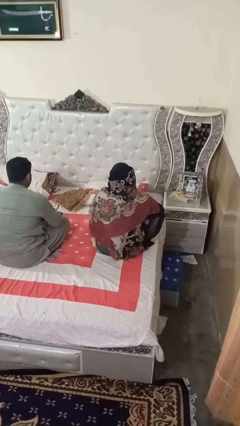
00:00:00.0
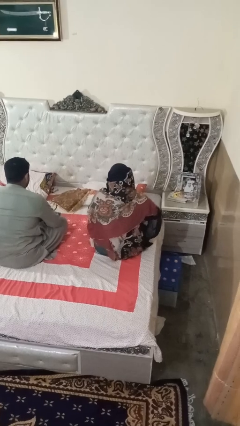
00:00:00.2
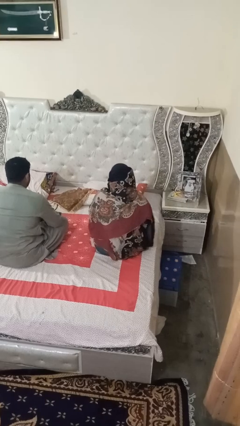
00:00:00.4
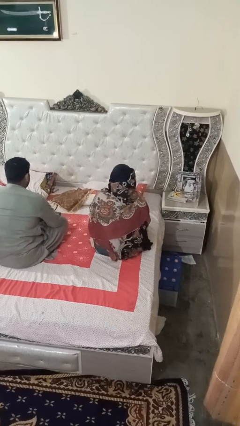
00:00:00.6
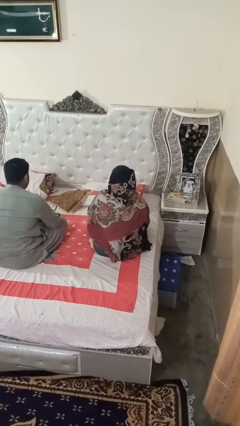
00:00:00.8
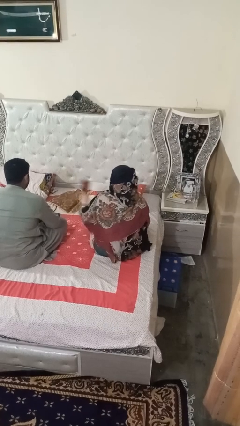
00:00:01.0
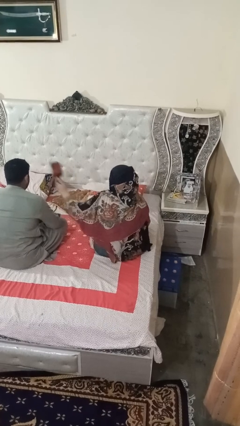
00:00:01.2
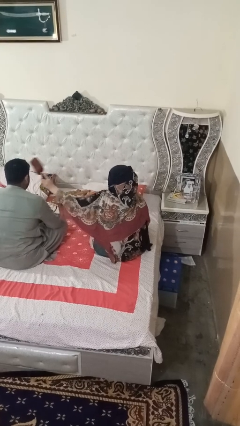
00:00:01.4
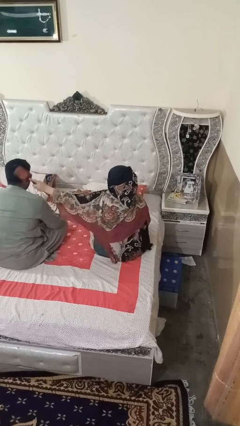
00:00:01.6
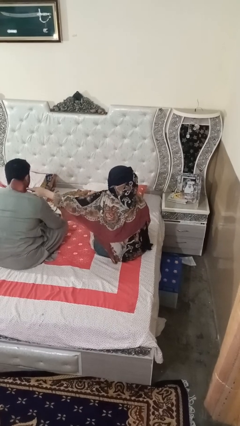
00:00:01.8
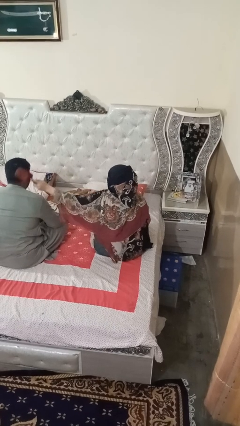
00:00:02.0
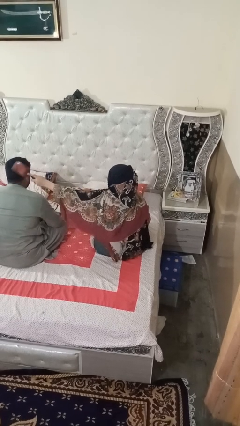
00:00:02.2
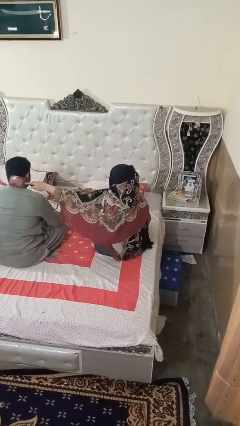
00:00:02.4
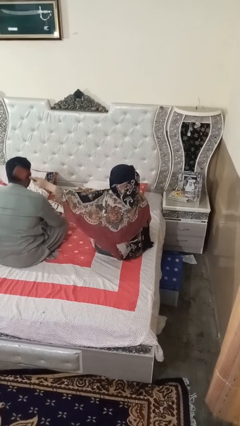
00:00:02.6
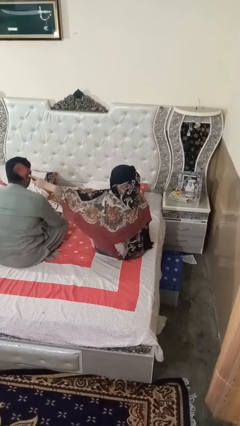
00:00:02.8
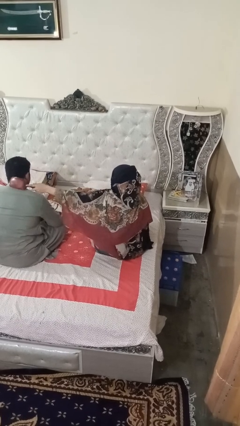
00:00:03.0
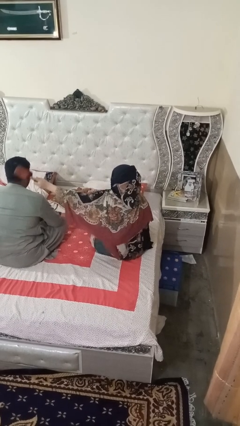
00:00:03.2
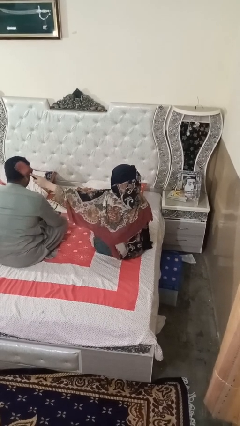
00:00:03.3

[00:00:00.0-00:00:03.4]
person brushes hair of person

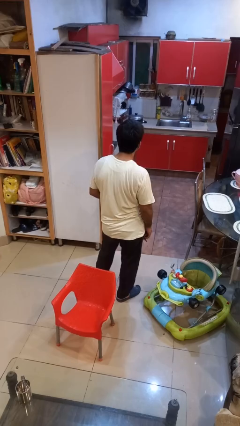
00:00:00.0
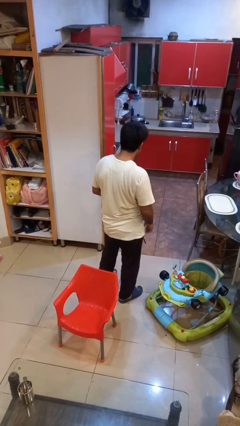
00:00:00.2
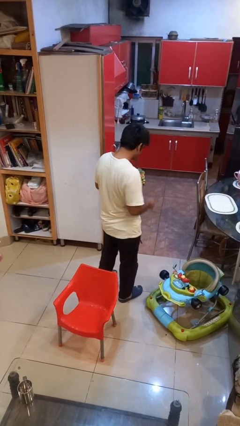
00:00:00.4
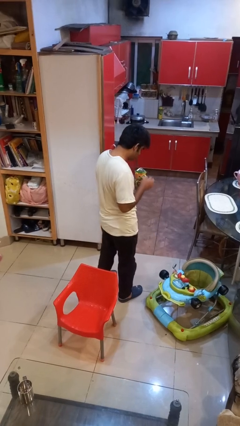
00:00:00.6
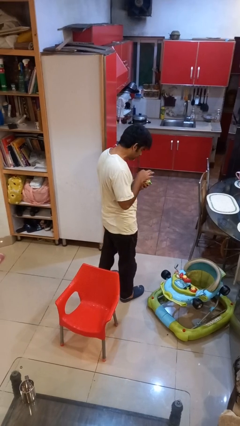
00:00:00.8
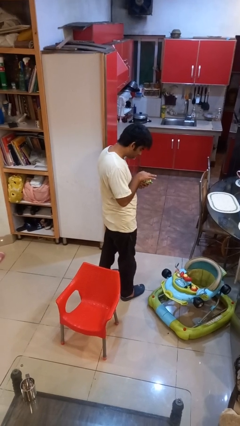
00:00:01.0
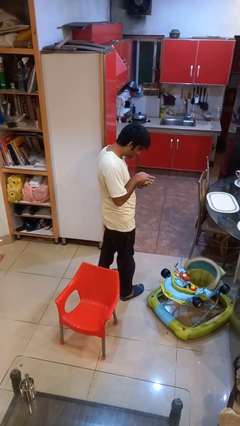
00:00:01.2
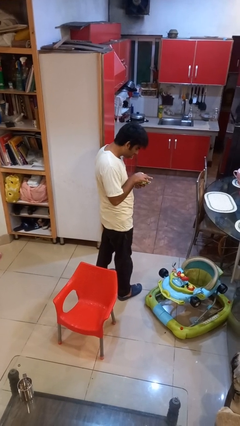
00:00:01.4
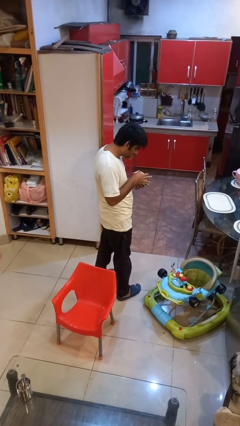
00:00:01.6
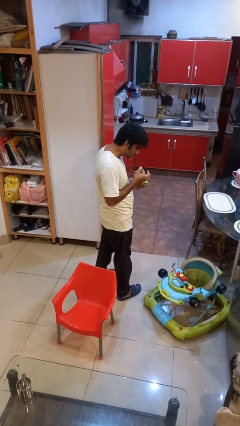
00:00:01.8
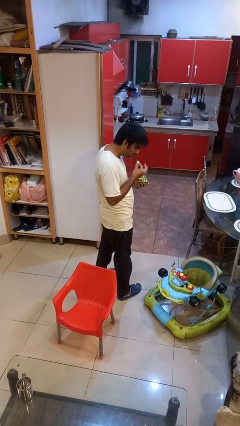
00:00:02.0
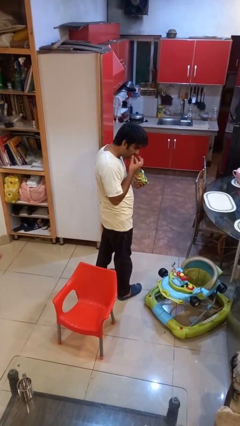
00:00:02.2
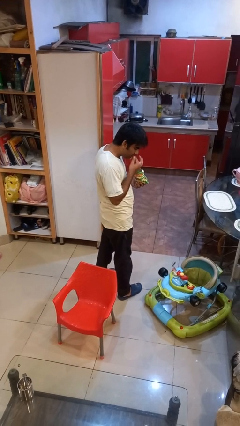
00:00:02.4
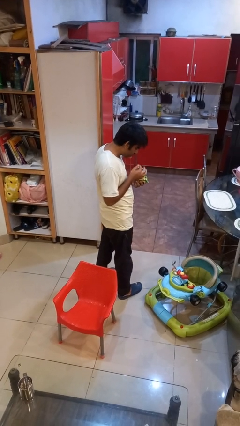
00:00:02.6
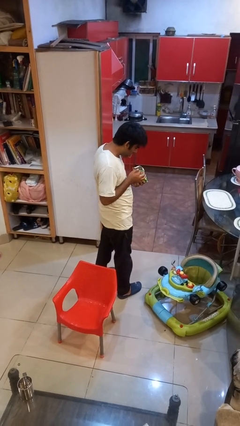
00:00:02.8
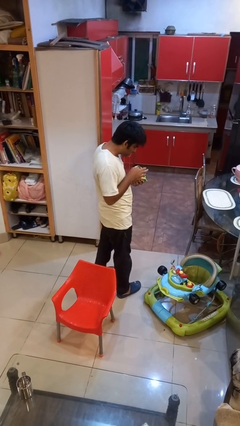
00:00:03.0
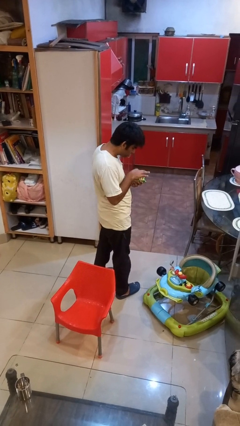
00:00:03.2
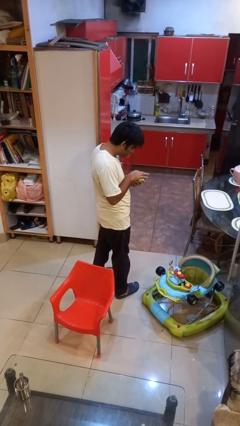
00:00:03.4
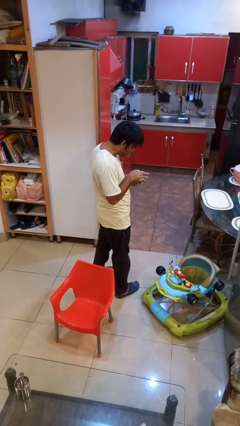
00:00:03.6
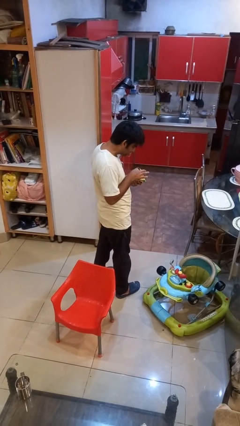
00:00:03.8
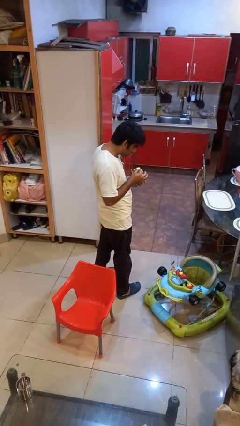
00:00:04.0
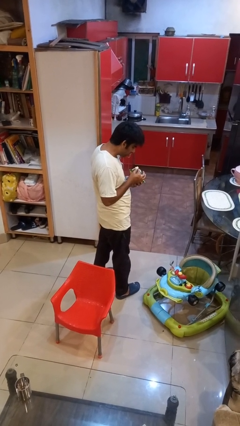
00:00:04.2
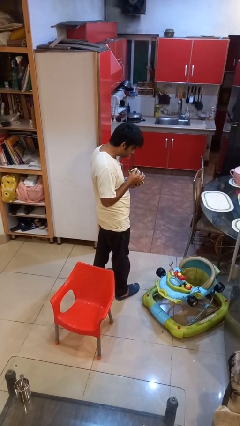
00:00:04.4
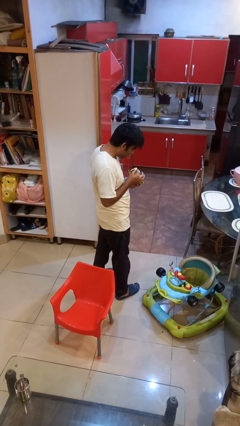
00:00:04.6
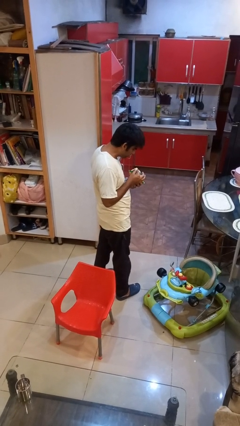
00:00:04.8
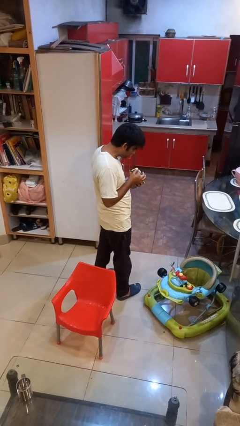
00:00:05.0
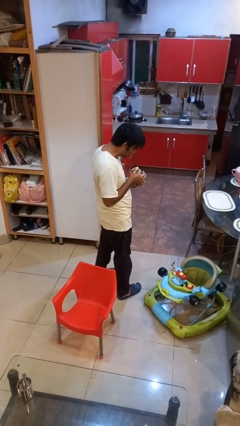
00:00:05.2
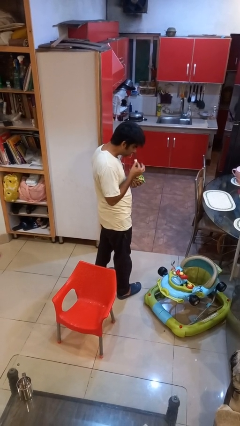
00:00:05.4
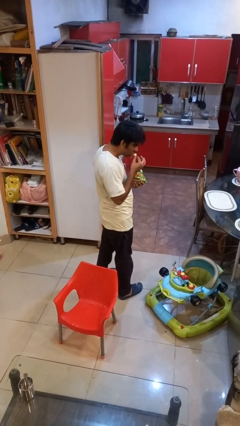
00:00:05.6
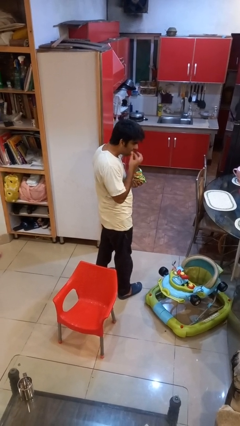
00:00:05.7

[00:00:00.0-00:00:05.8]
person eats snack from bag

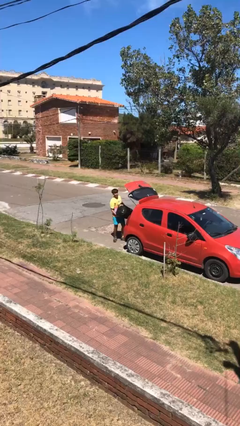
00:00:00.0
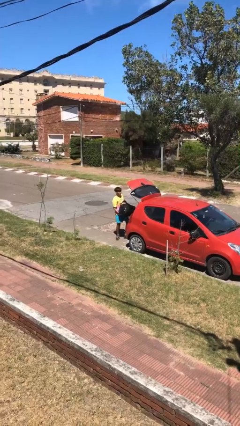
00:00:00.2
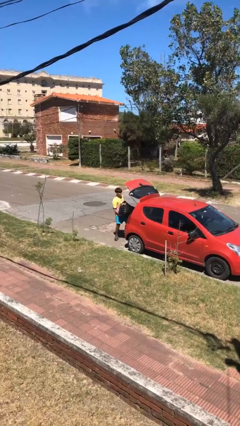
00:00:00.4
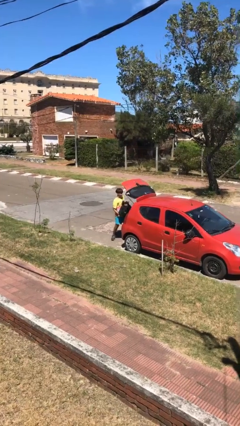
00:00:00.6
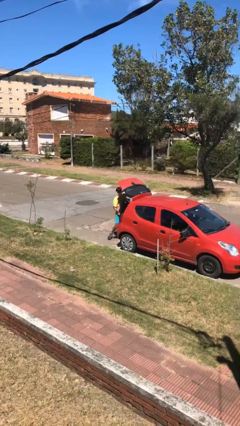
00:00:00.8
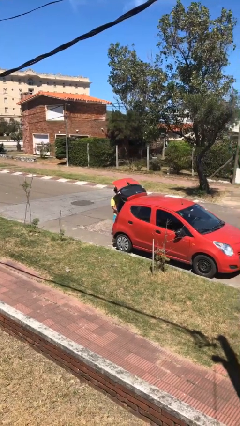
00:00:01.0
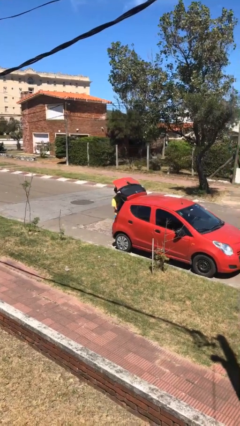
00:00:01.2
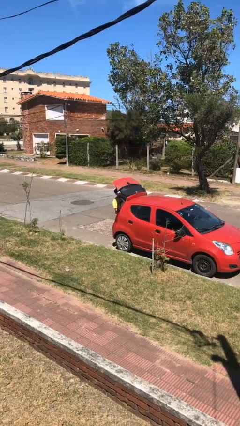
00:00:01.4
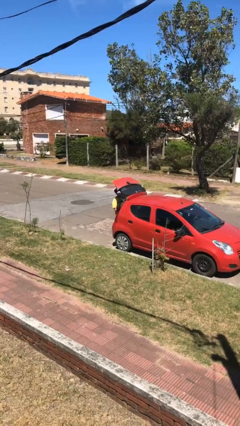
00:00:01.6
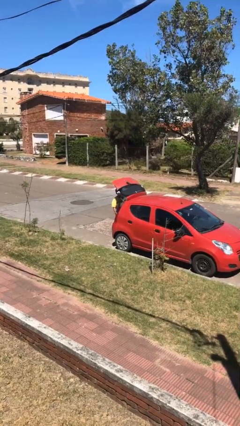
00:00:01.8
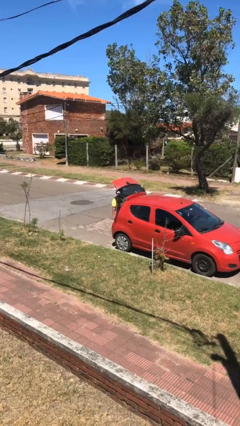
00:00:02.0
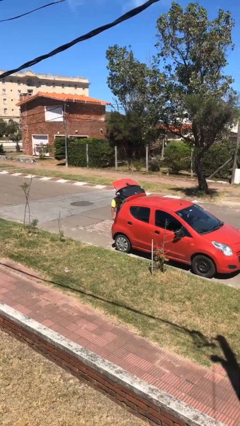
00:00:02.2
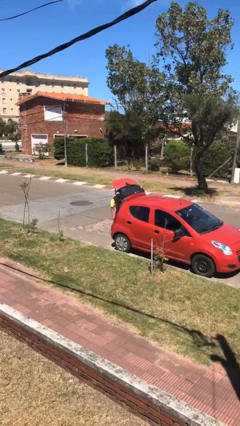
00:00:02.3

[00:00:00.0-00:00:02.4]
person loads car

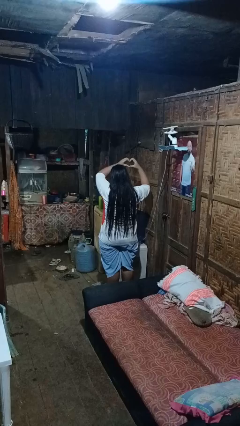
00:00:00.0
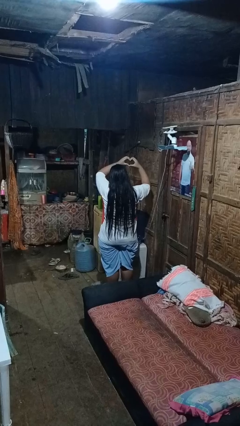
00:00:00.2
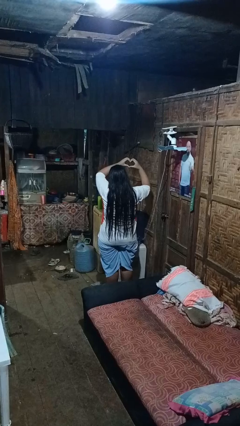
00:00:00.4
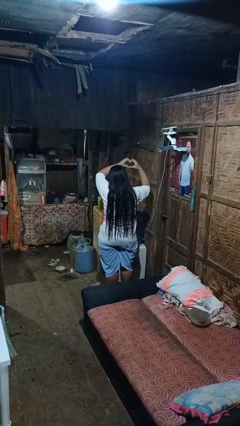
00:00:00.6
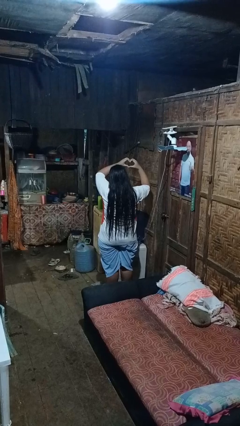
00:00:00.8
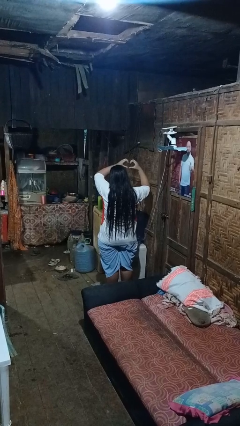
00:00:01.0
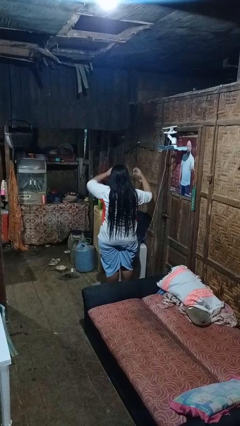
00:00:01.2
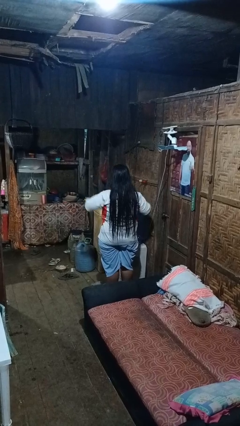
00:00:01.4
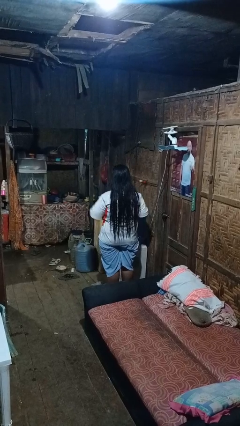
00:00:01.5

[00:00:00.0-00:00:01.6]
person gestures heart

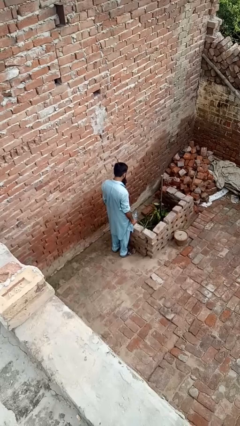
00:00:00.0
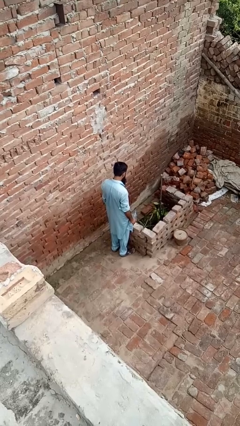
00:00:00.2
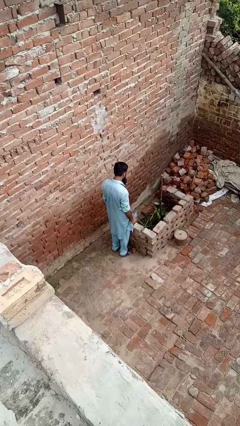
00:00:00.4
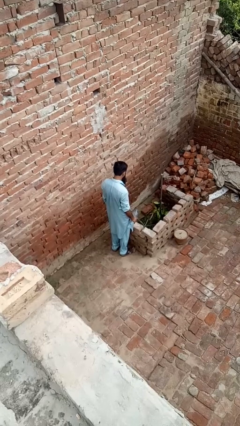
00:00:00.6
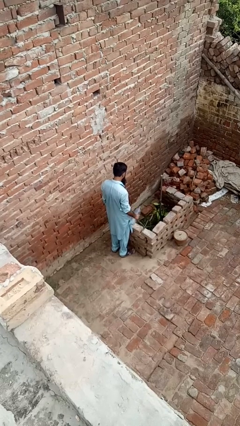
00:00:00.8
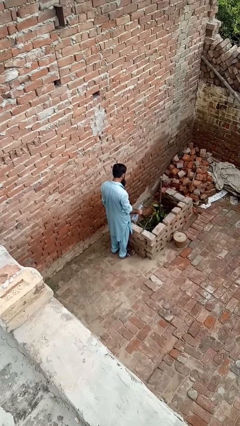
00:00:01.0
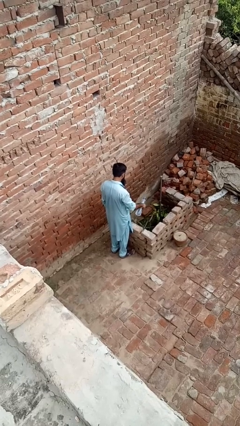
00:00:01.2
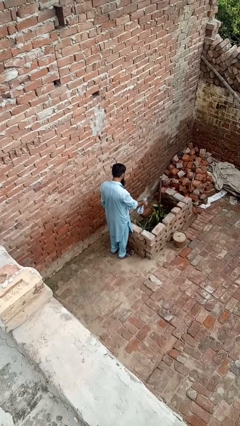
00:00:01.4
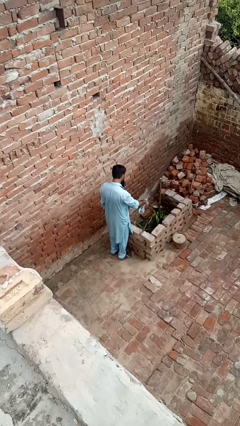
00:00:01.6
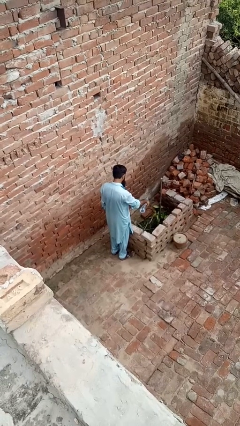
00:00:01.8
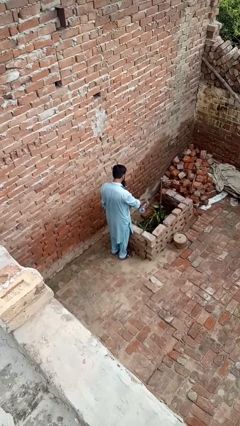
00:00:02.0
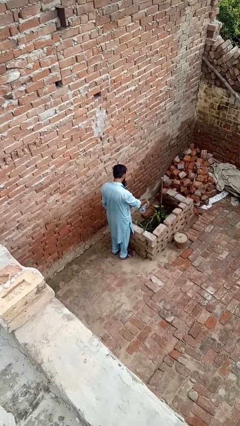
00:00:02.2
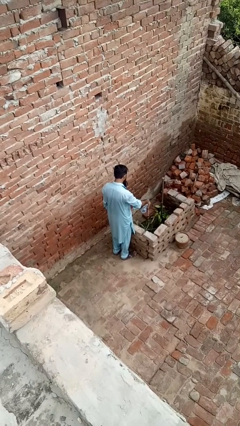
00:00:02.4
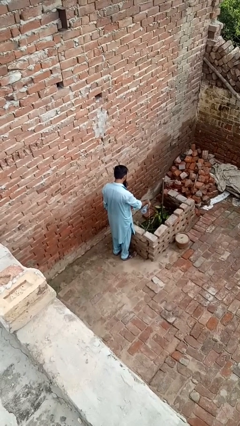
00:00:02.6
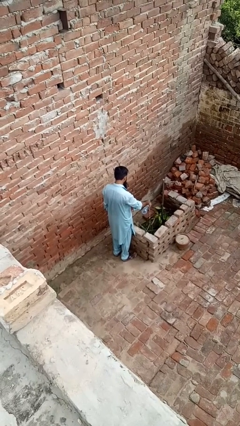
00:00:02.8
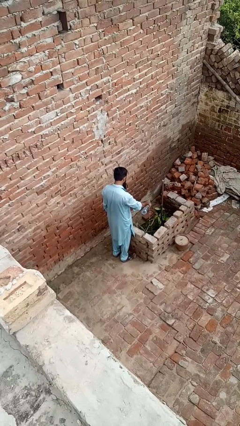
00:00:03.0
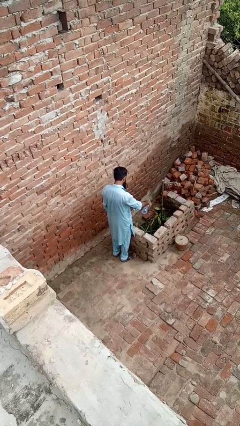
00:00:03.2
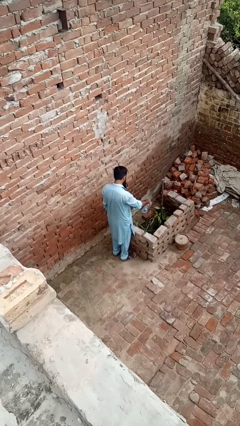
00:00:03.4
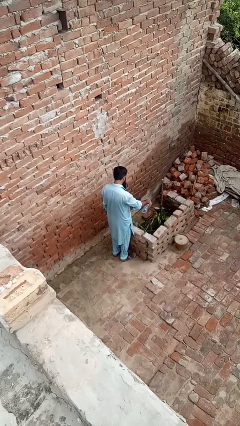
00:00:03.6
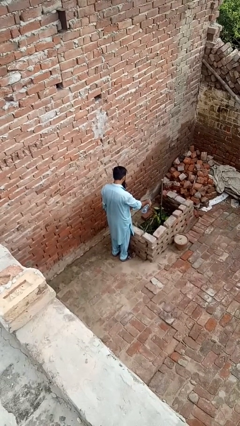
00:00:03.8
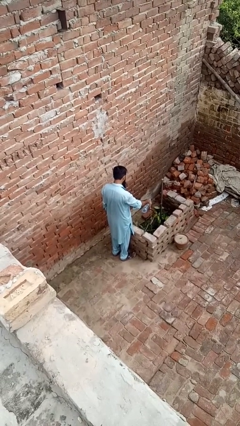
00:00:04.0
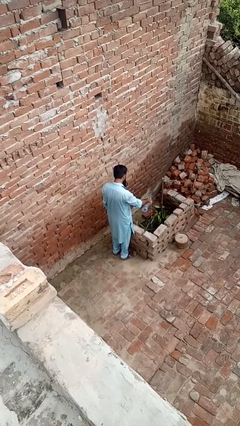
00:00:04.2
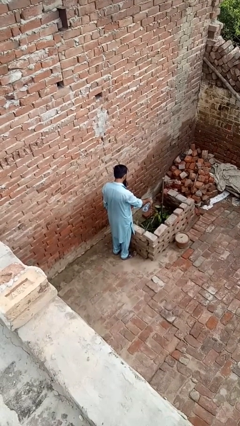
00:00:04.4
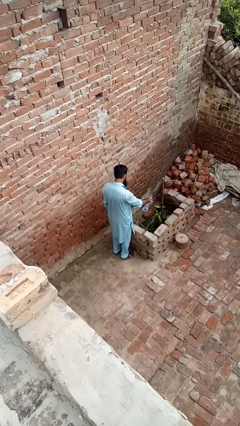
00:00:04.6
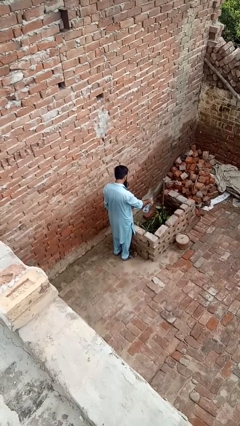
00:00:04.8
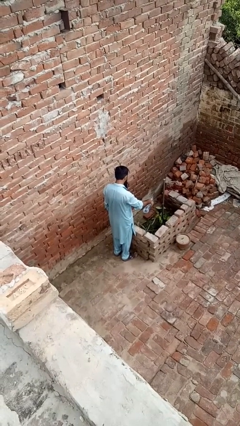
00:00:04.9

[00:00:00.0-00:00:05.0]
person waters houseplant
